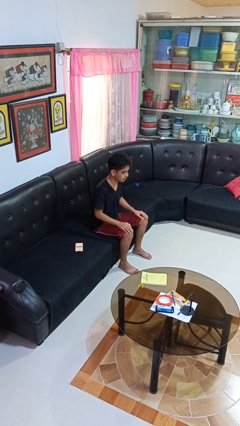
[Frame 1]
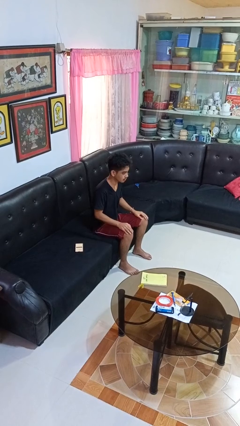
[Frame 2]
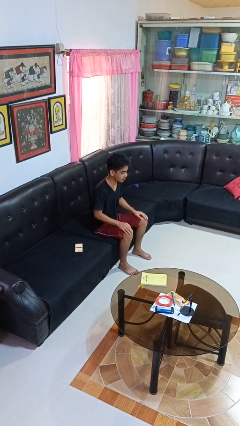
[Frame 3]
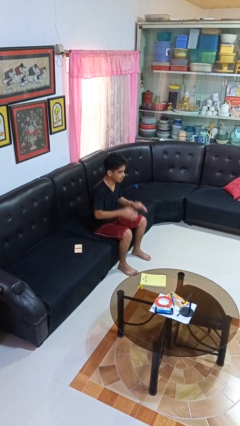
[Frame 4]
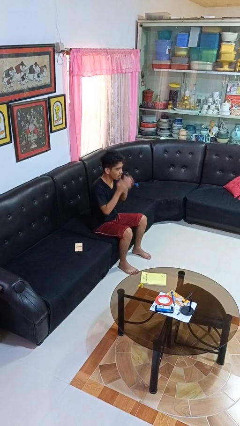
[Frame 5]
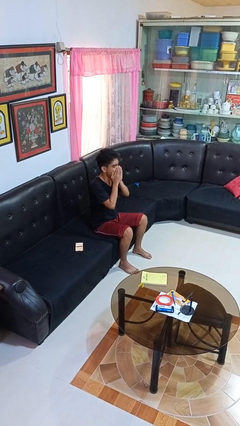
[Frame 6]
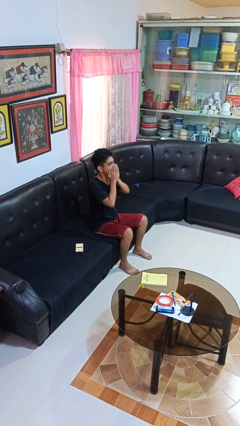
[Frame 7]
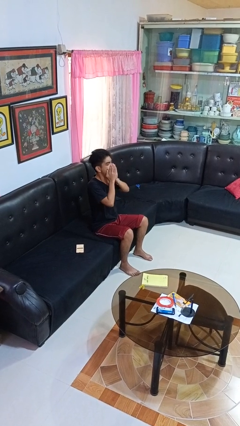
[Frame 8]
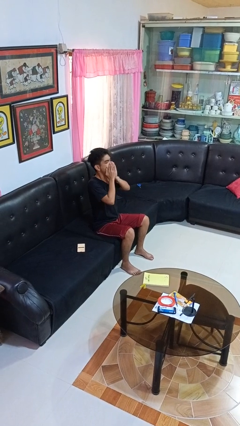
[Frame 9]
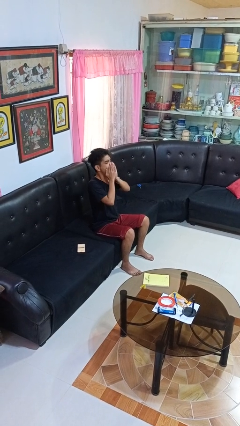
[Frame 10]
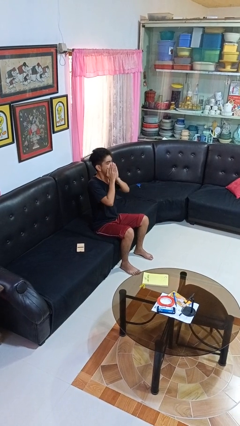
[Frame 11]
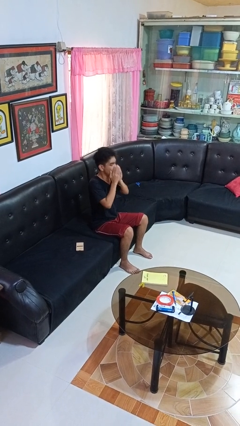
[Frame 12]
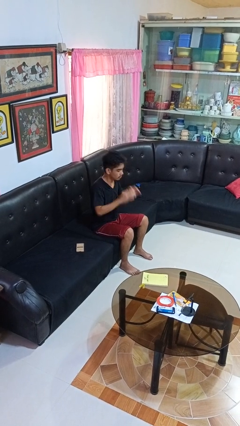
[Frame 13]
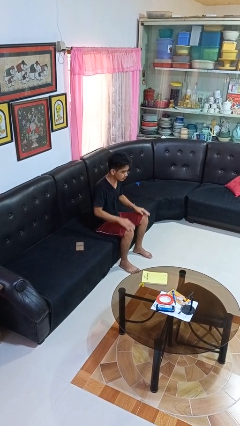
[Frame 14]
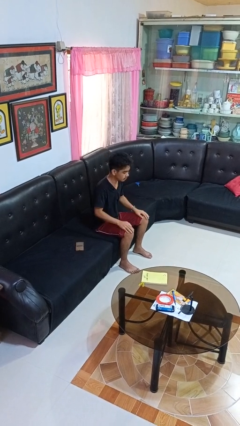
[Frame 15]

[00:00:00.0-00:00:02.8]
person yawns

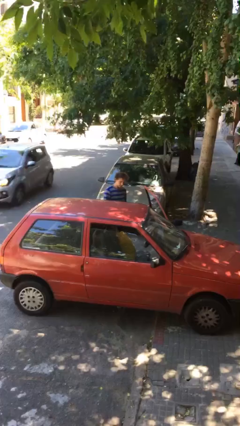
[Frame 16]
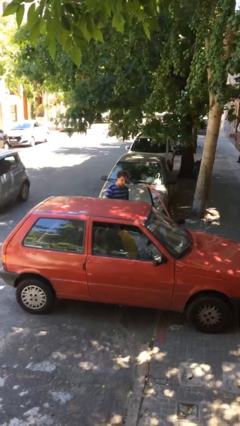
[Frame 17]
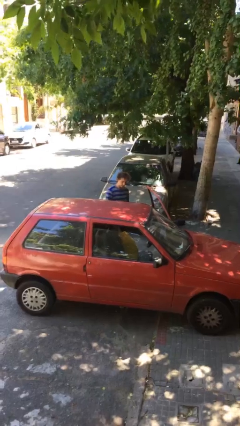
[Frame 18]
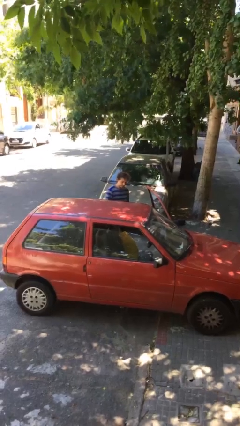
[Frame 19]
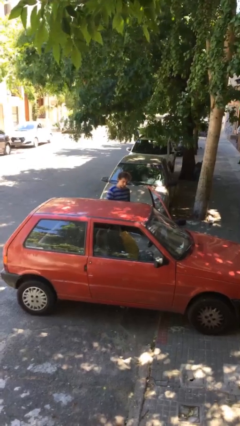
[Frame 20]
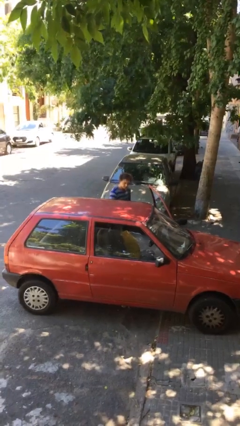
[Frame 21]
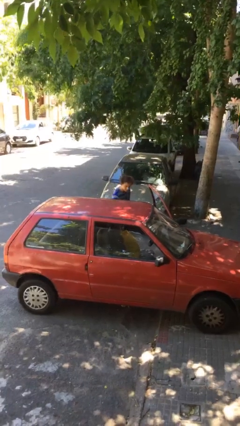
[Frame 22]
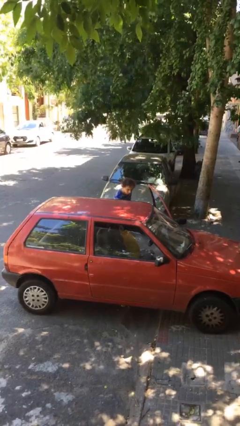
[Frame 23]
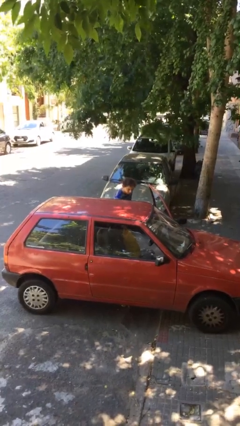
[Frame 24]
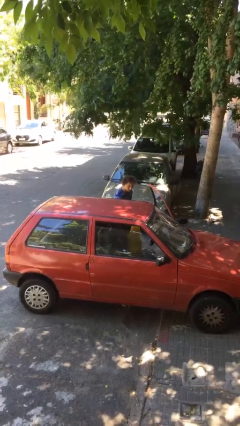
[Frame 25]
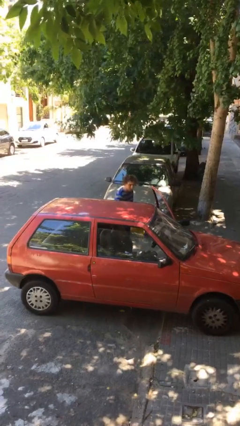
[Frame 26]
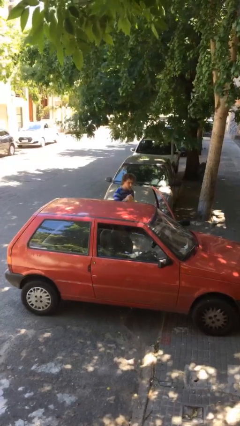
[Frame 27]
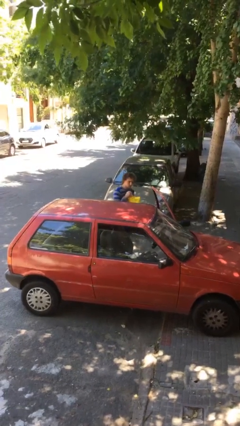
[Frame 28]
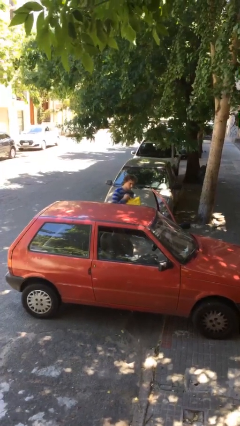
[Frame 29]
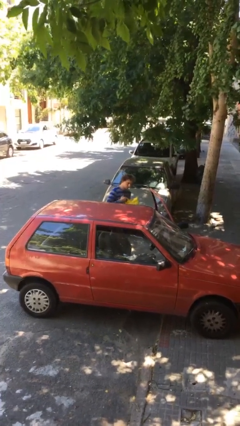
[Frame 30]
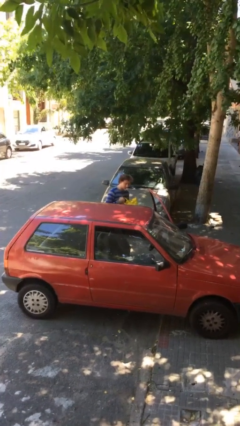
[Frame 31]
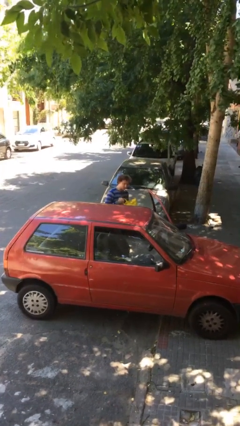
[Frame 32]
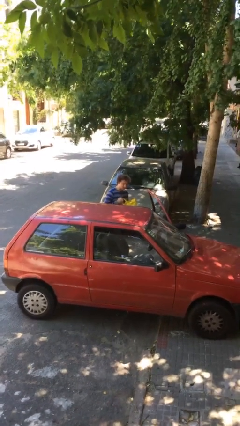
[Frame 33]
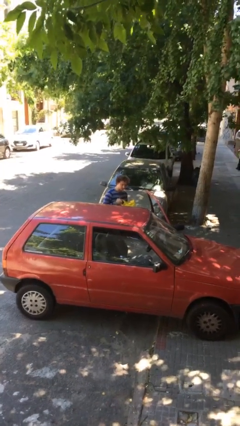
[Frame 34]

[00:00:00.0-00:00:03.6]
person unloads car

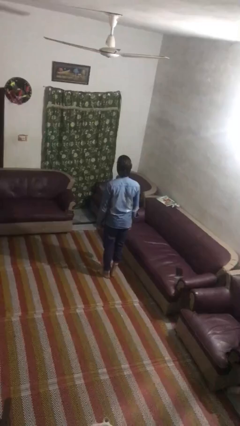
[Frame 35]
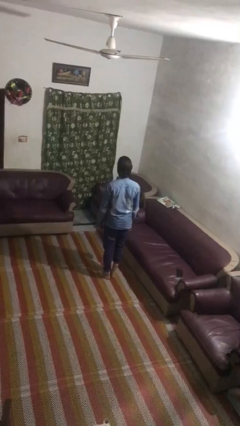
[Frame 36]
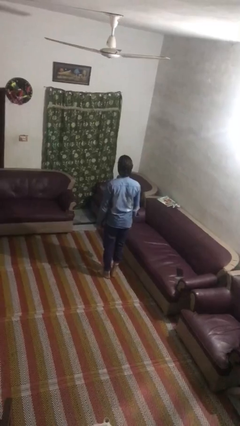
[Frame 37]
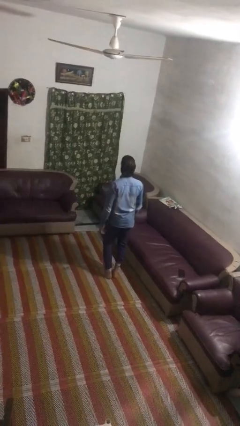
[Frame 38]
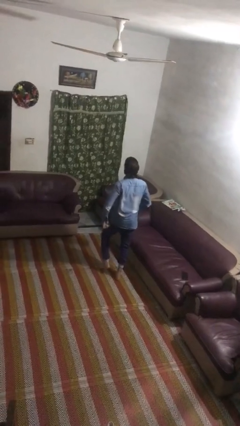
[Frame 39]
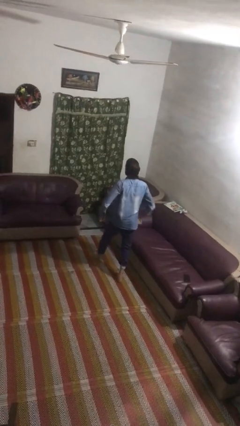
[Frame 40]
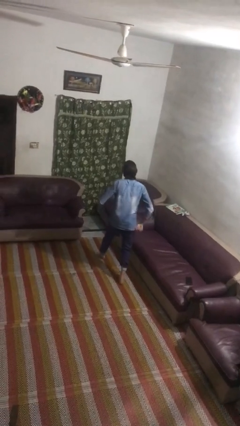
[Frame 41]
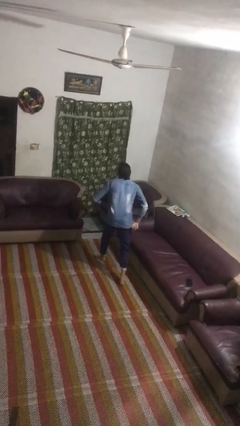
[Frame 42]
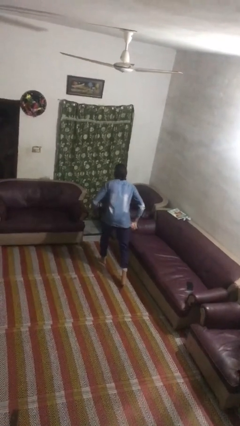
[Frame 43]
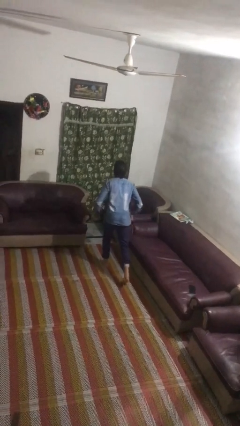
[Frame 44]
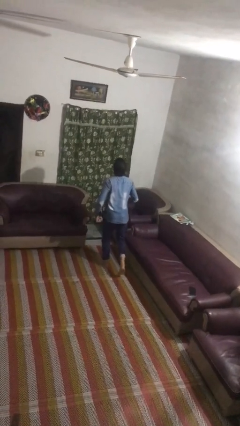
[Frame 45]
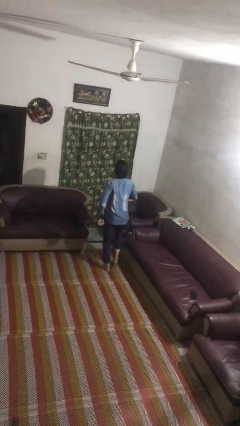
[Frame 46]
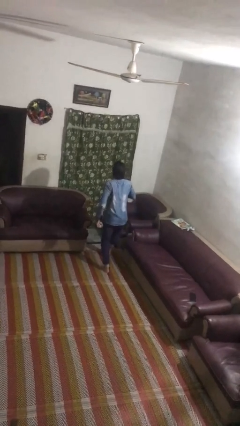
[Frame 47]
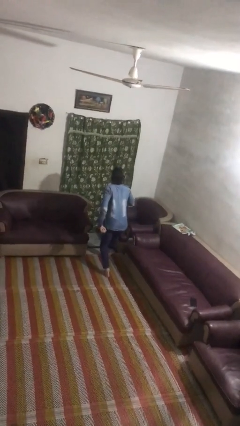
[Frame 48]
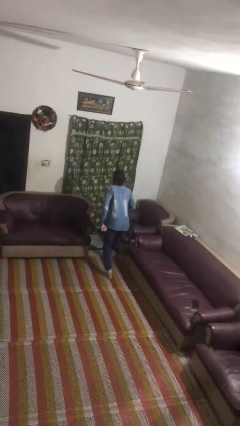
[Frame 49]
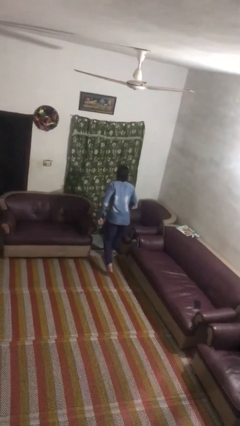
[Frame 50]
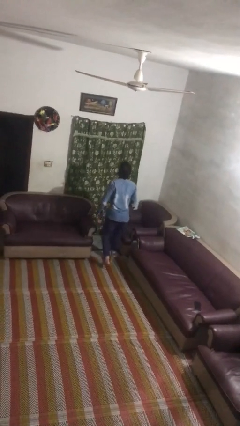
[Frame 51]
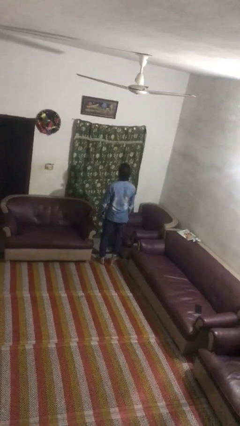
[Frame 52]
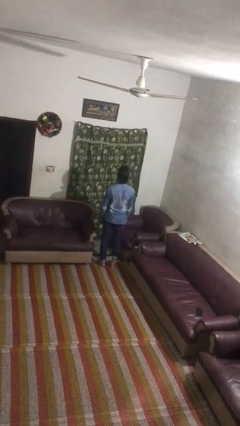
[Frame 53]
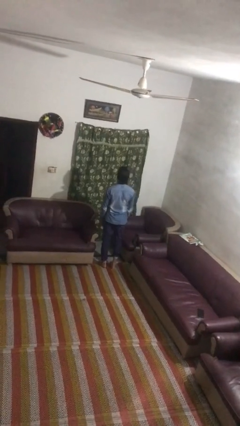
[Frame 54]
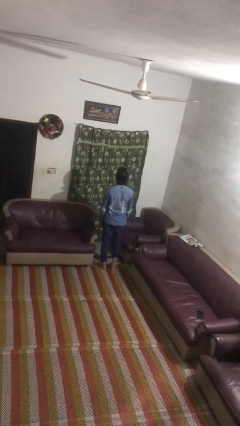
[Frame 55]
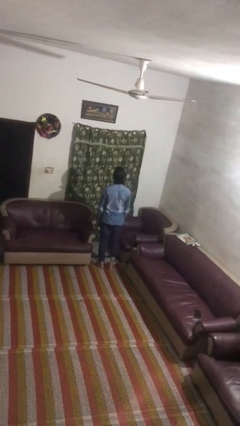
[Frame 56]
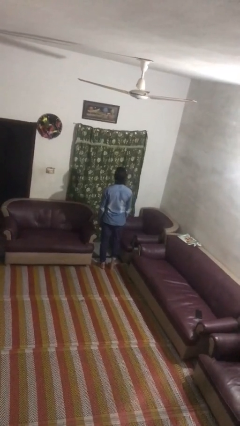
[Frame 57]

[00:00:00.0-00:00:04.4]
person walks tiptoe

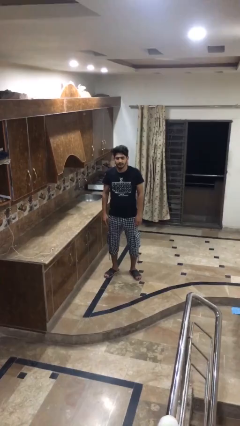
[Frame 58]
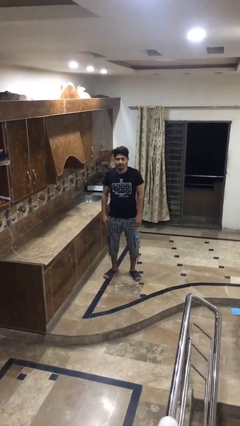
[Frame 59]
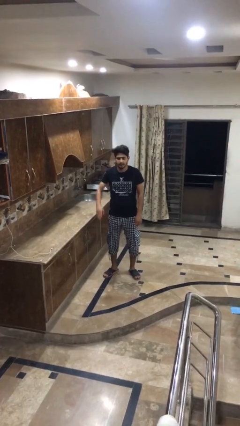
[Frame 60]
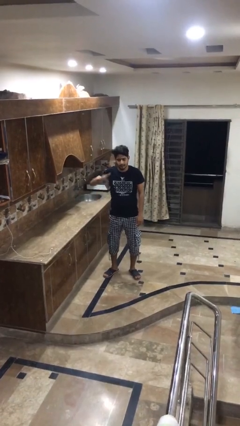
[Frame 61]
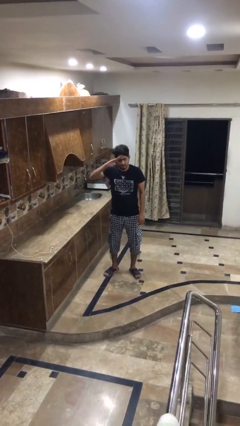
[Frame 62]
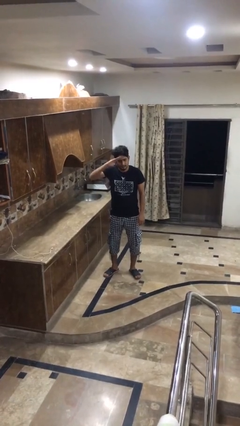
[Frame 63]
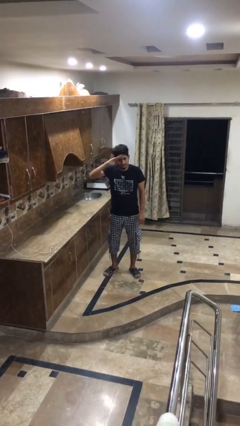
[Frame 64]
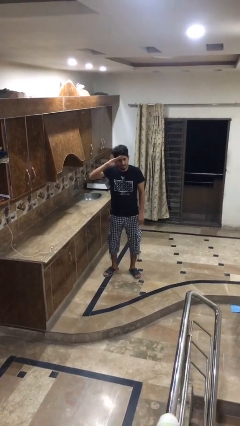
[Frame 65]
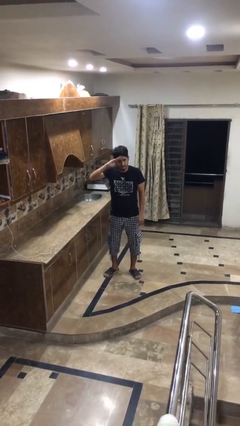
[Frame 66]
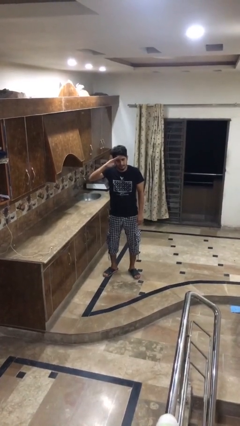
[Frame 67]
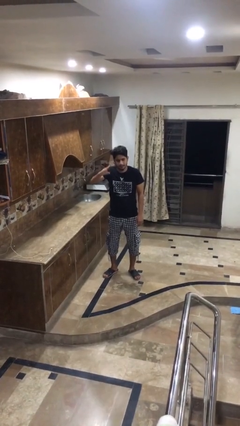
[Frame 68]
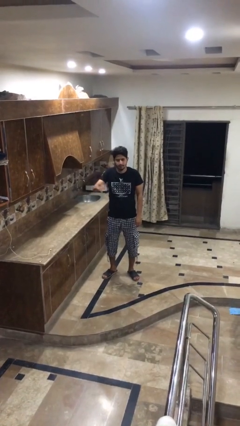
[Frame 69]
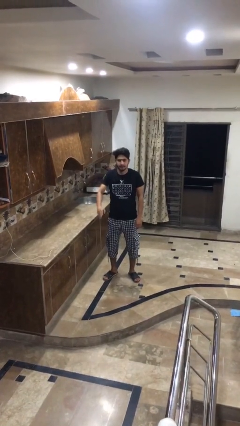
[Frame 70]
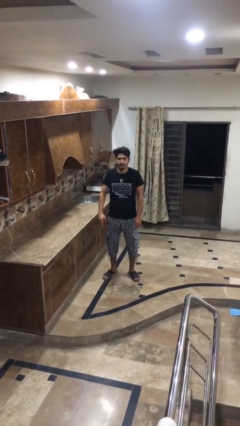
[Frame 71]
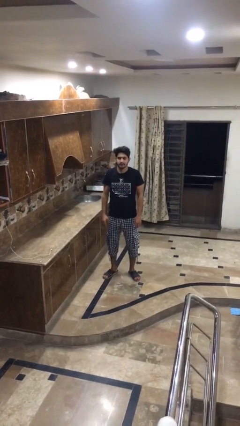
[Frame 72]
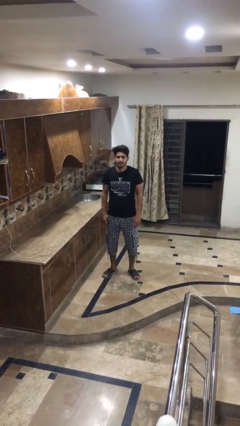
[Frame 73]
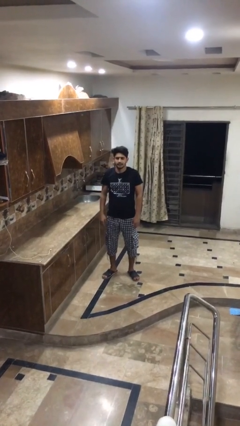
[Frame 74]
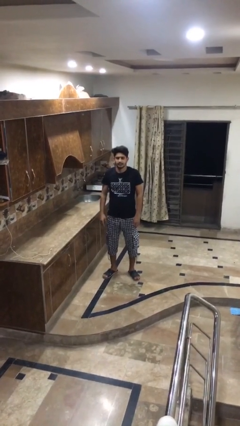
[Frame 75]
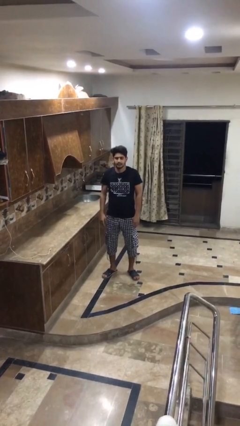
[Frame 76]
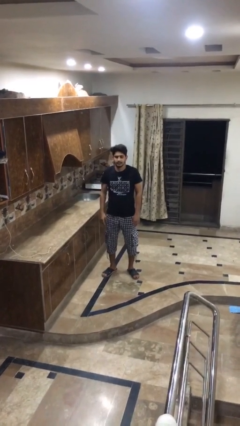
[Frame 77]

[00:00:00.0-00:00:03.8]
person salutes

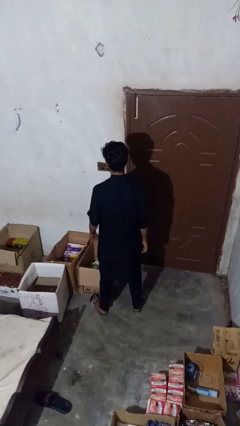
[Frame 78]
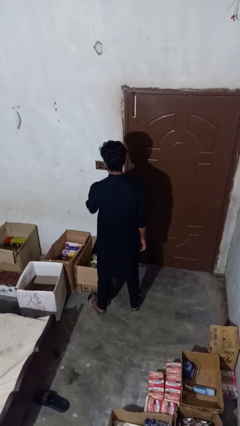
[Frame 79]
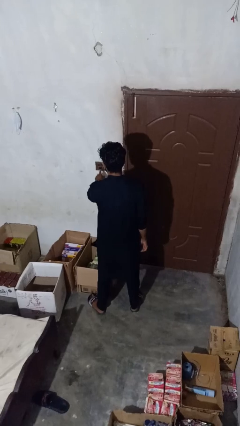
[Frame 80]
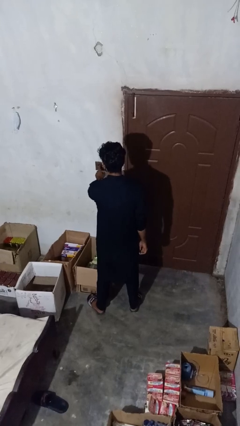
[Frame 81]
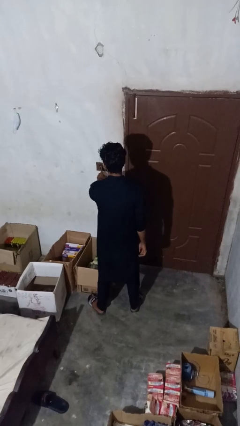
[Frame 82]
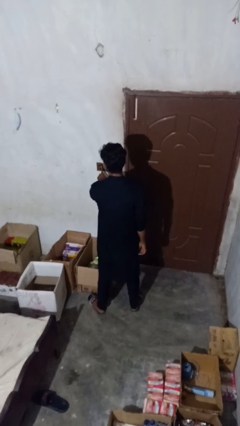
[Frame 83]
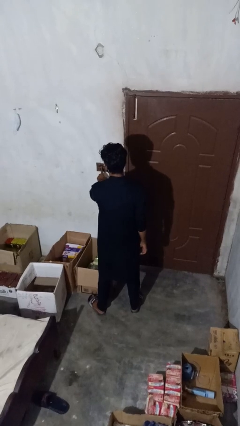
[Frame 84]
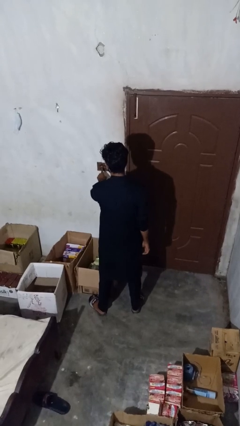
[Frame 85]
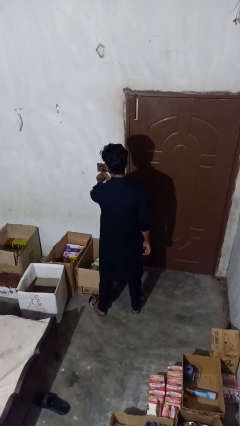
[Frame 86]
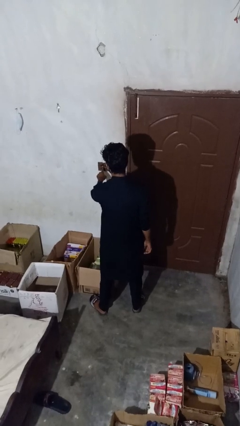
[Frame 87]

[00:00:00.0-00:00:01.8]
person turns on fan

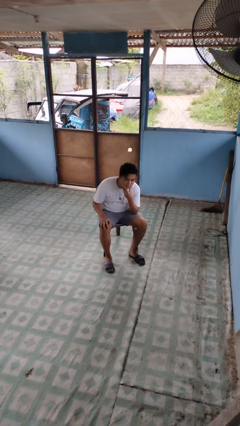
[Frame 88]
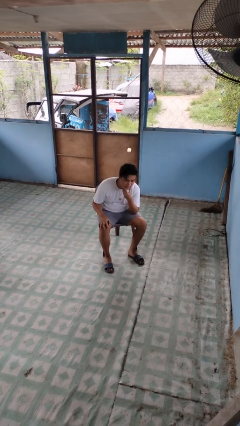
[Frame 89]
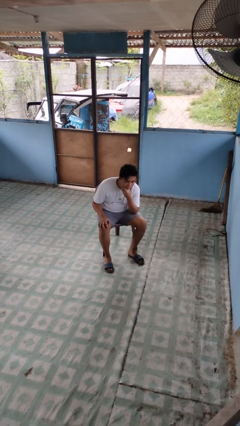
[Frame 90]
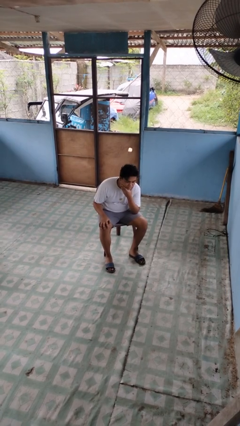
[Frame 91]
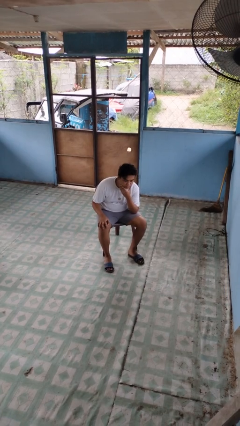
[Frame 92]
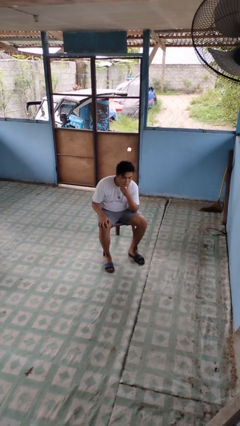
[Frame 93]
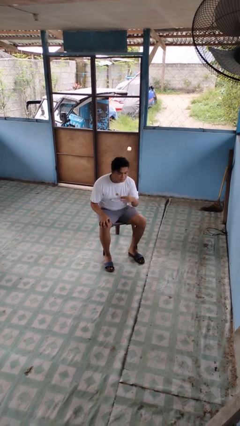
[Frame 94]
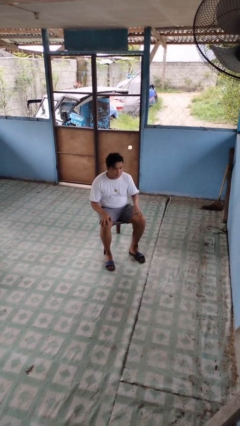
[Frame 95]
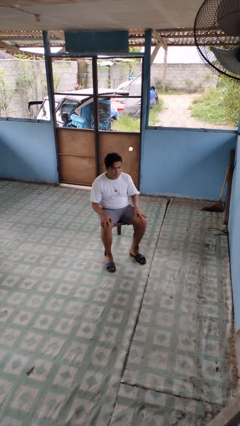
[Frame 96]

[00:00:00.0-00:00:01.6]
person strokes chin
